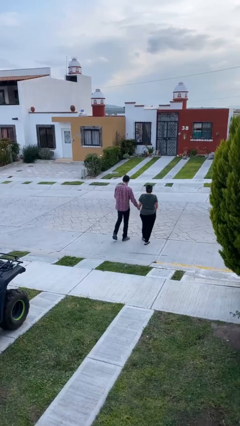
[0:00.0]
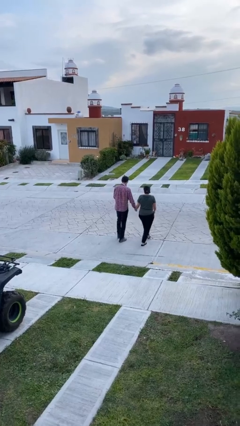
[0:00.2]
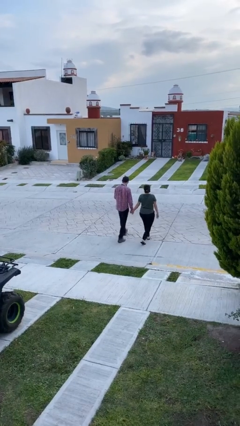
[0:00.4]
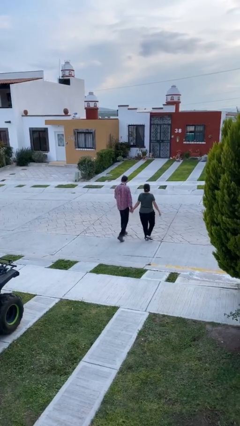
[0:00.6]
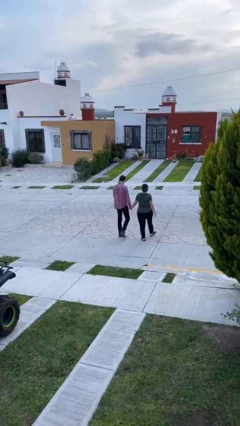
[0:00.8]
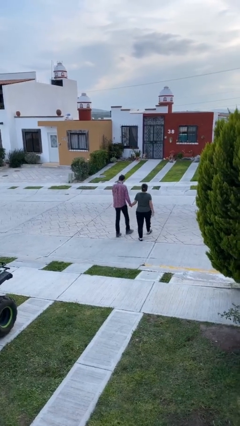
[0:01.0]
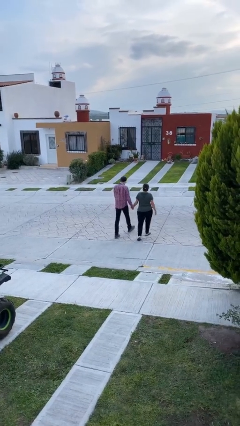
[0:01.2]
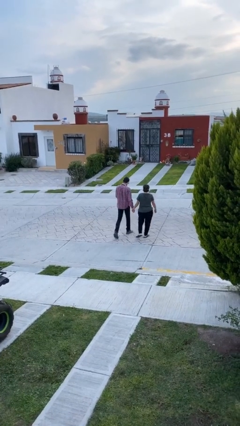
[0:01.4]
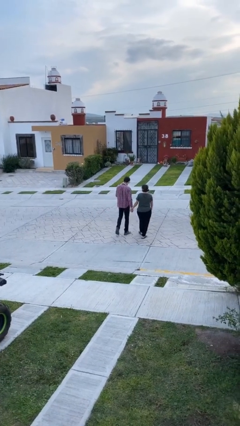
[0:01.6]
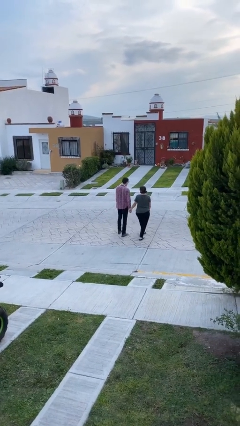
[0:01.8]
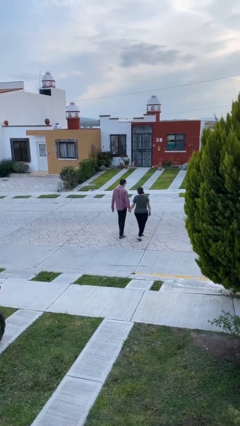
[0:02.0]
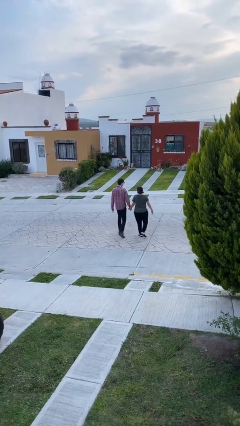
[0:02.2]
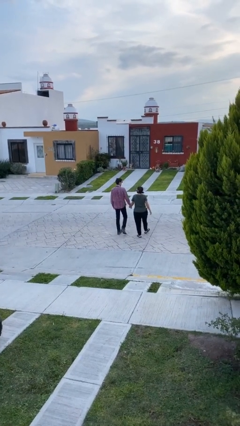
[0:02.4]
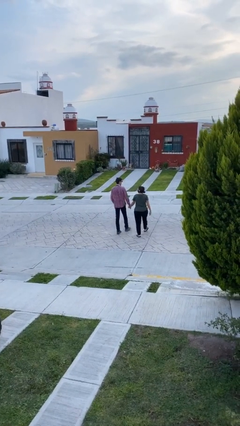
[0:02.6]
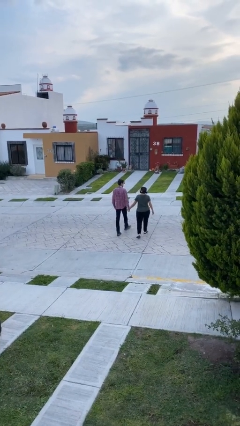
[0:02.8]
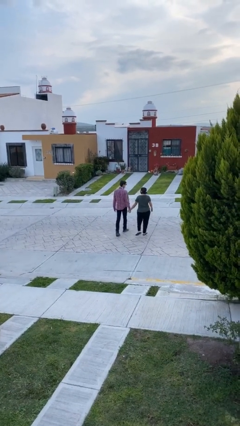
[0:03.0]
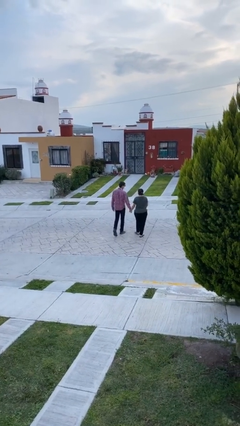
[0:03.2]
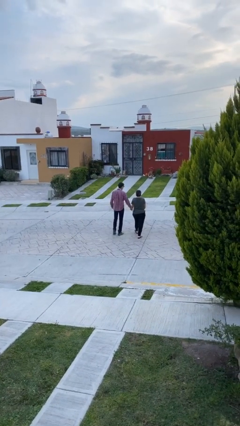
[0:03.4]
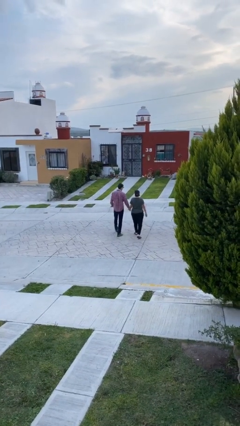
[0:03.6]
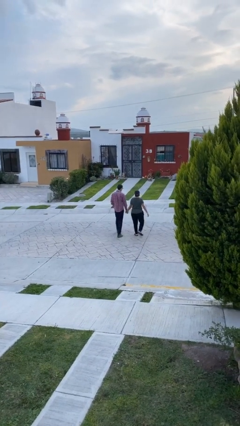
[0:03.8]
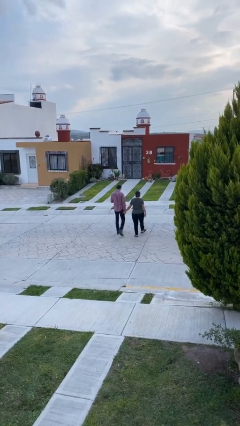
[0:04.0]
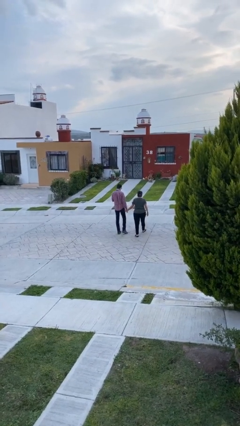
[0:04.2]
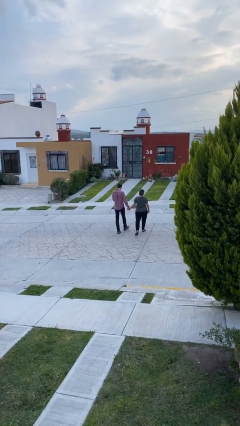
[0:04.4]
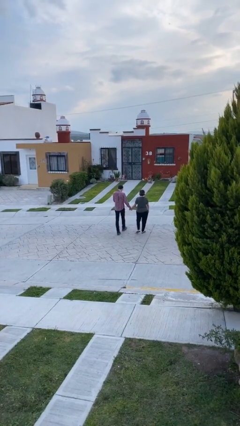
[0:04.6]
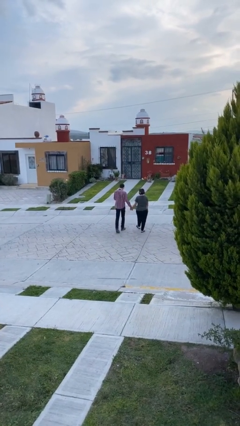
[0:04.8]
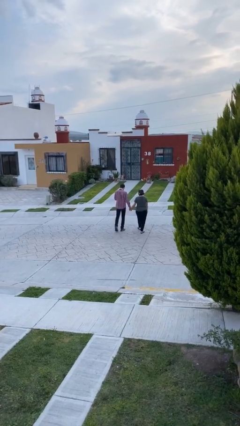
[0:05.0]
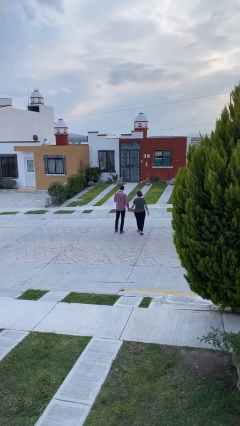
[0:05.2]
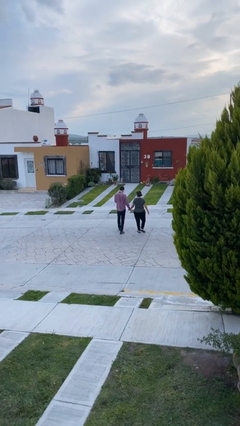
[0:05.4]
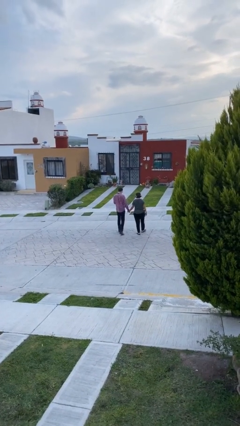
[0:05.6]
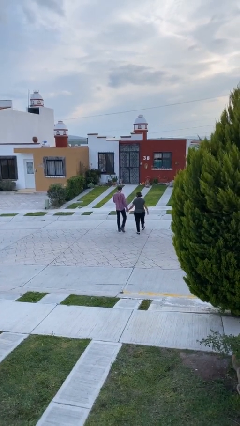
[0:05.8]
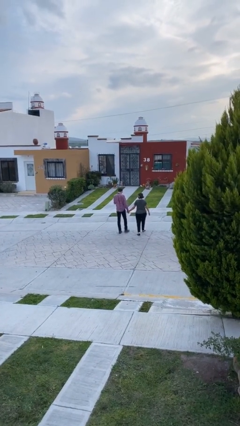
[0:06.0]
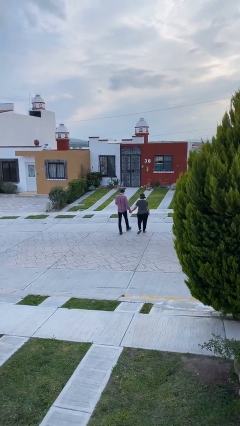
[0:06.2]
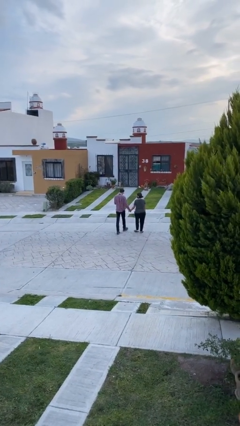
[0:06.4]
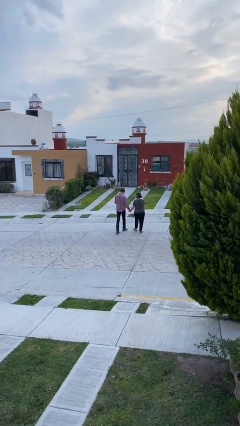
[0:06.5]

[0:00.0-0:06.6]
person holds hand

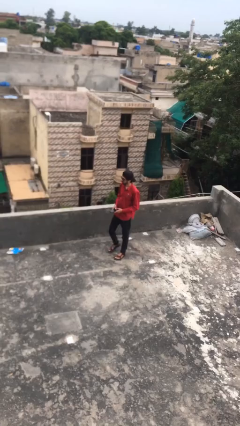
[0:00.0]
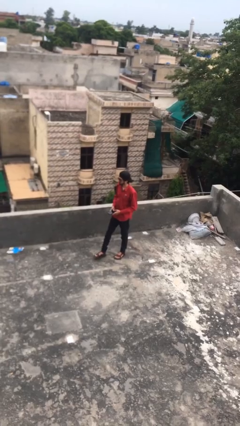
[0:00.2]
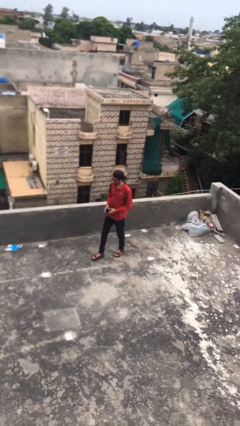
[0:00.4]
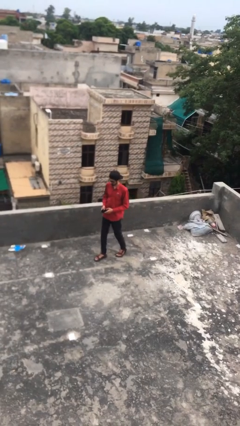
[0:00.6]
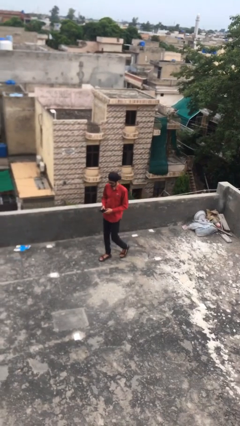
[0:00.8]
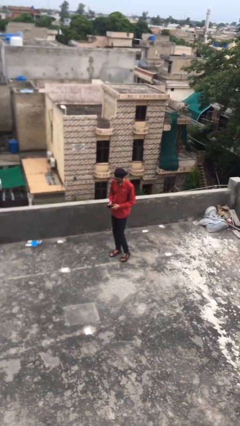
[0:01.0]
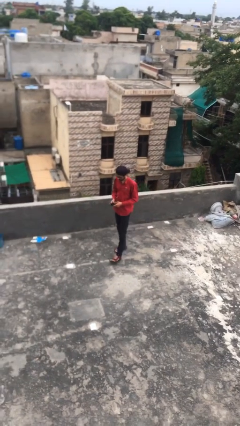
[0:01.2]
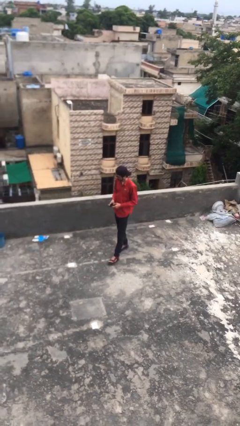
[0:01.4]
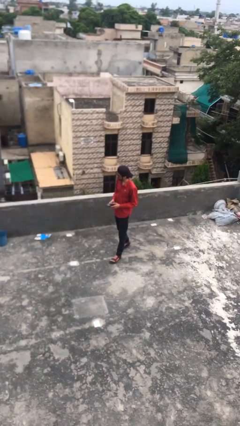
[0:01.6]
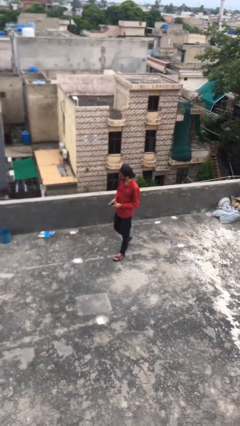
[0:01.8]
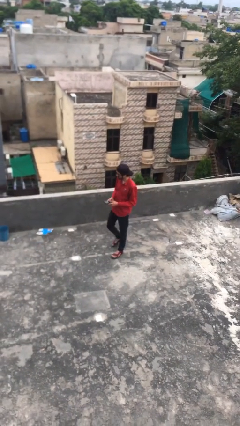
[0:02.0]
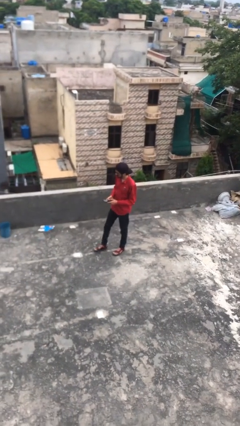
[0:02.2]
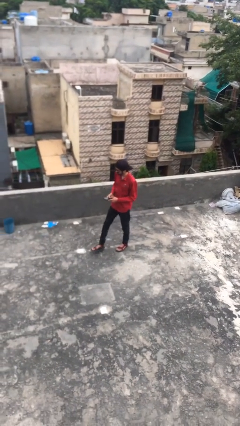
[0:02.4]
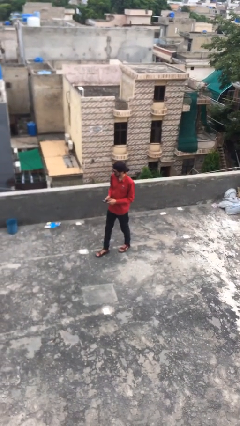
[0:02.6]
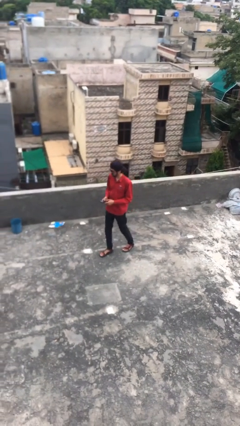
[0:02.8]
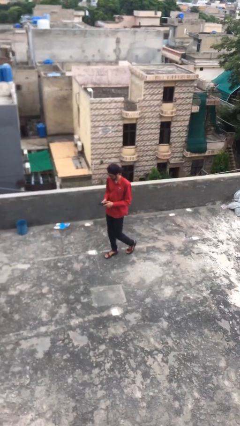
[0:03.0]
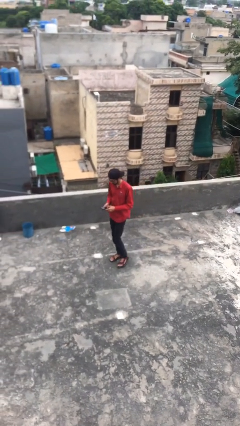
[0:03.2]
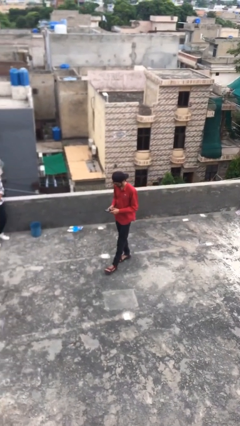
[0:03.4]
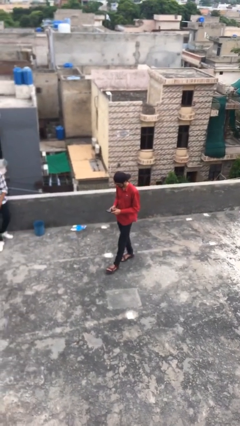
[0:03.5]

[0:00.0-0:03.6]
person texts on phone

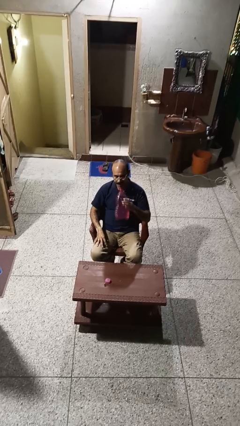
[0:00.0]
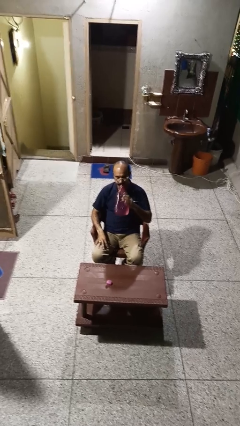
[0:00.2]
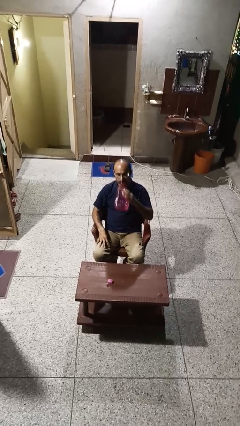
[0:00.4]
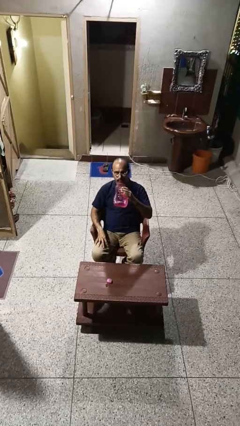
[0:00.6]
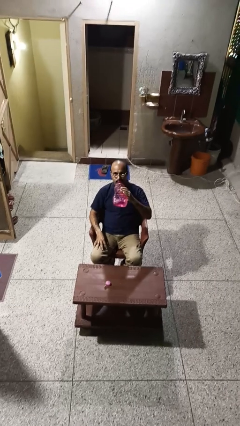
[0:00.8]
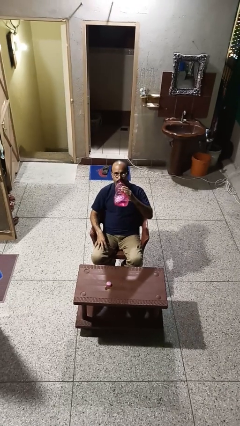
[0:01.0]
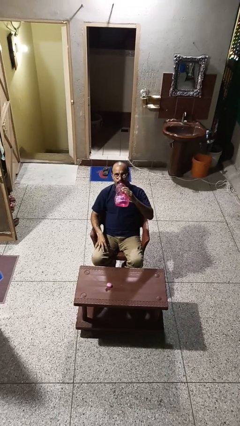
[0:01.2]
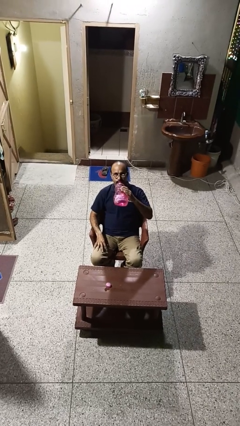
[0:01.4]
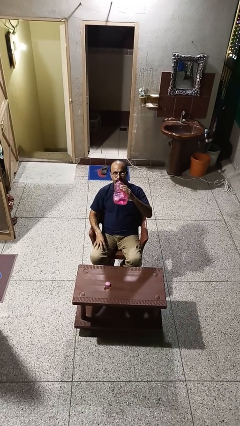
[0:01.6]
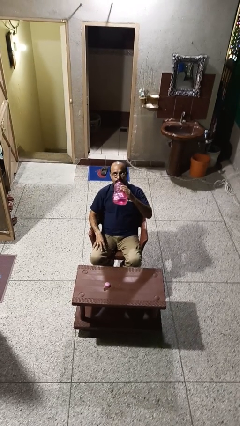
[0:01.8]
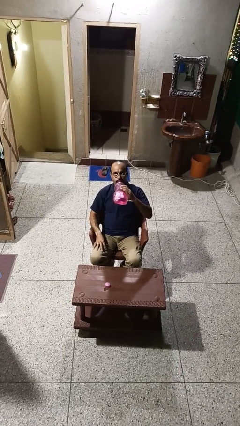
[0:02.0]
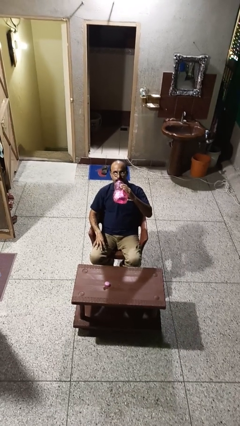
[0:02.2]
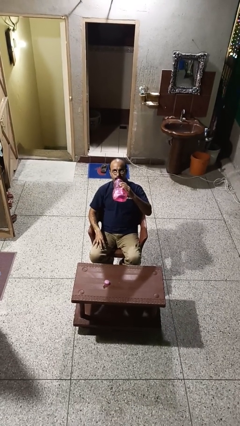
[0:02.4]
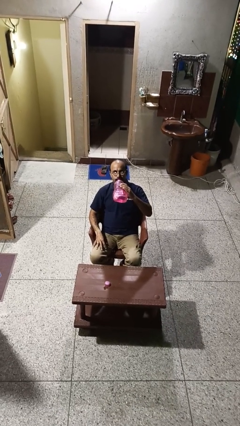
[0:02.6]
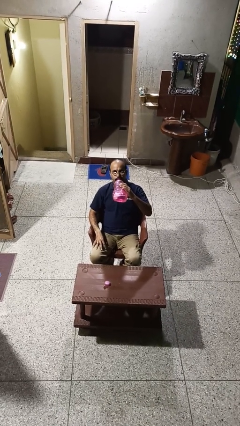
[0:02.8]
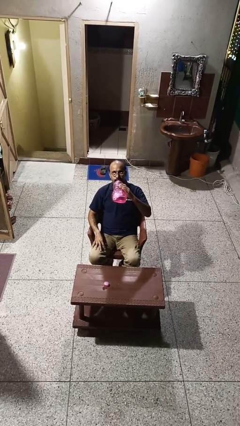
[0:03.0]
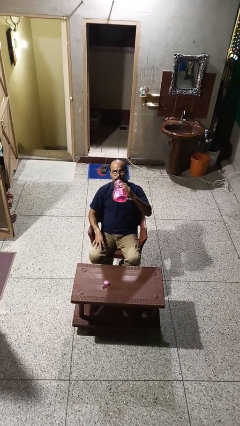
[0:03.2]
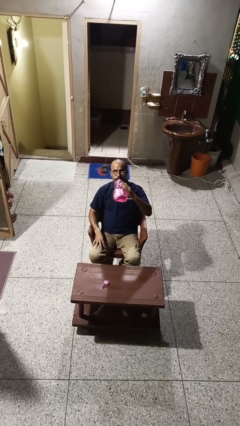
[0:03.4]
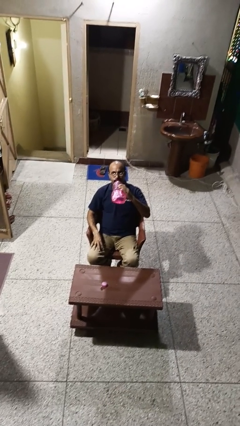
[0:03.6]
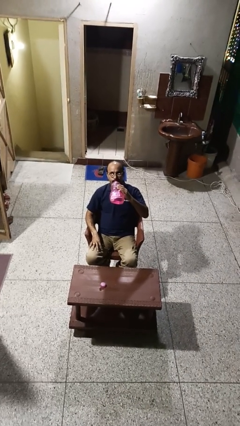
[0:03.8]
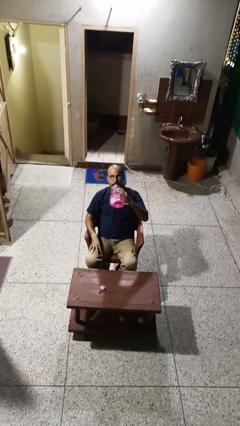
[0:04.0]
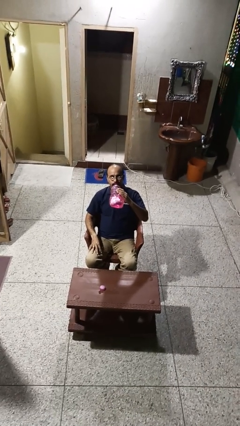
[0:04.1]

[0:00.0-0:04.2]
person drinks from bottle

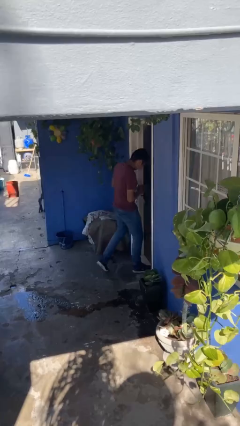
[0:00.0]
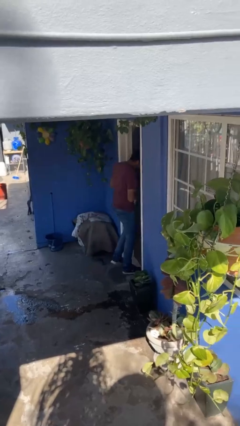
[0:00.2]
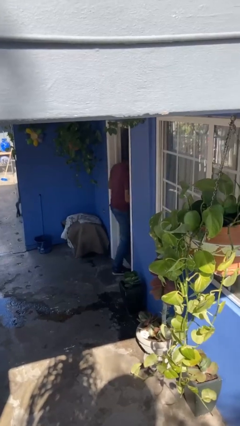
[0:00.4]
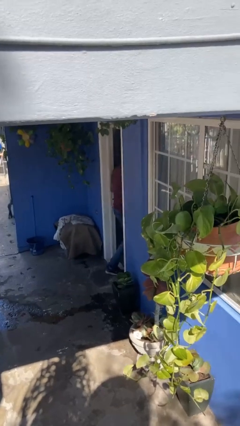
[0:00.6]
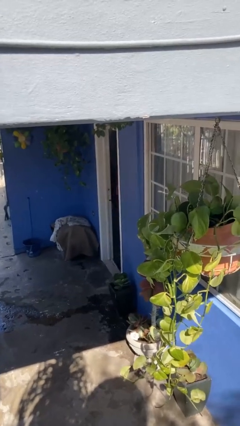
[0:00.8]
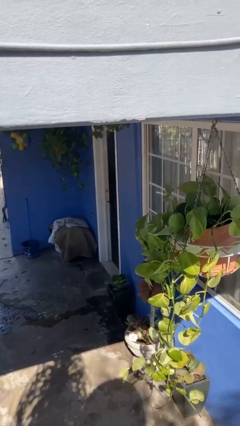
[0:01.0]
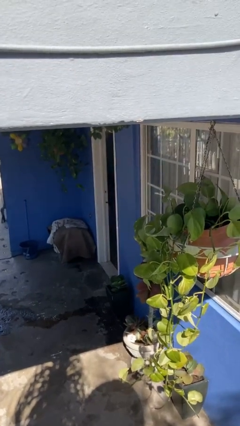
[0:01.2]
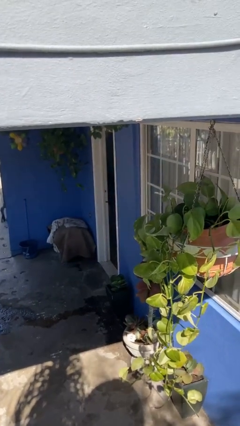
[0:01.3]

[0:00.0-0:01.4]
person exits scene through structure

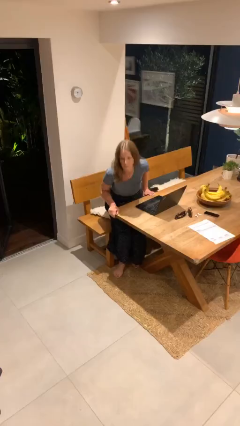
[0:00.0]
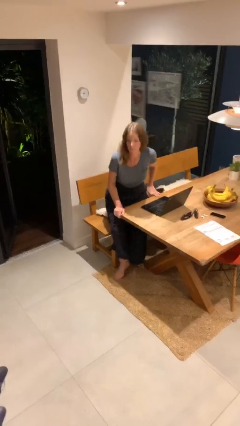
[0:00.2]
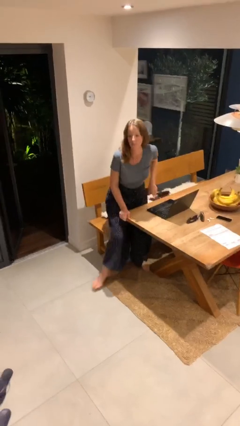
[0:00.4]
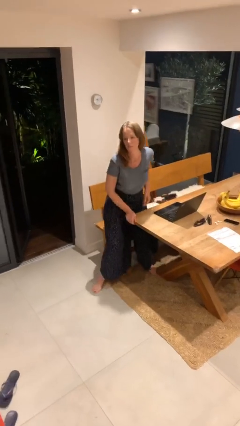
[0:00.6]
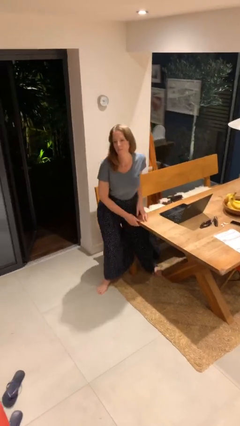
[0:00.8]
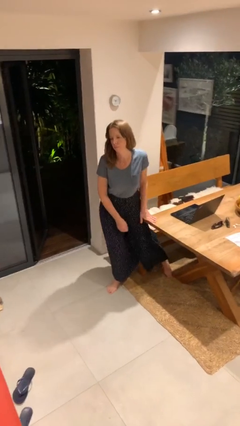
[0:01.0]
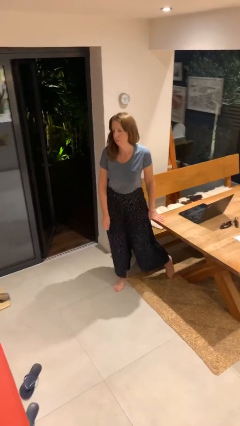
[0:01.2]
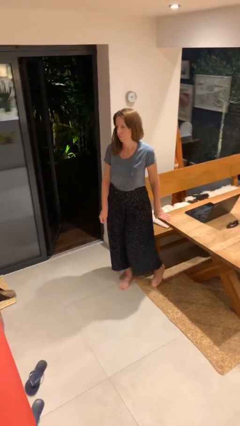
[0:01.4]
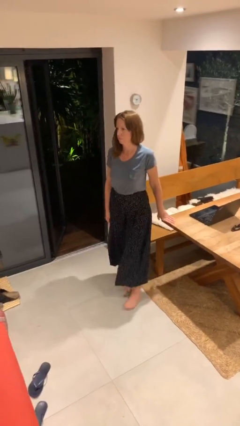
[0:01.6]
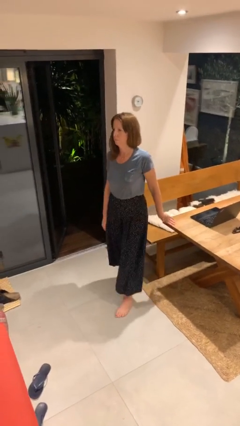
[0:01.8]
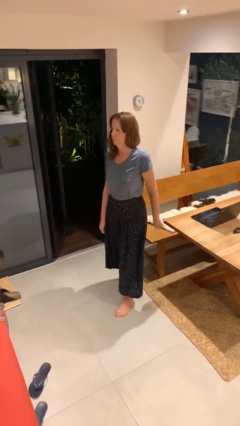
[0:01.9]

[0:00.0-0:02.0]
person stands up
